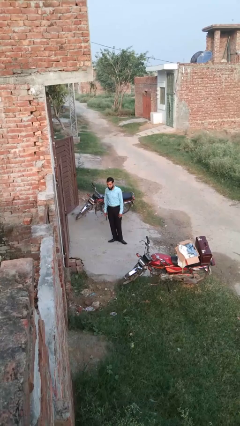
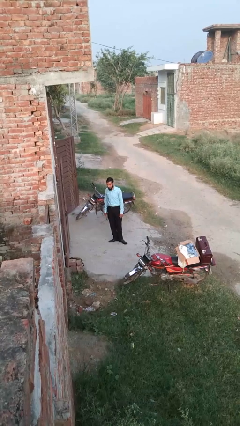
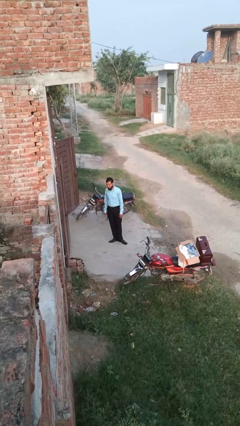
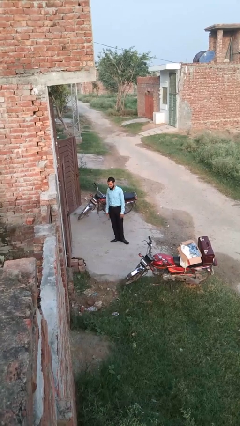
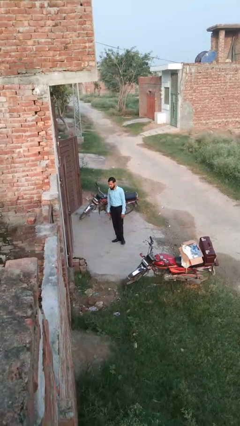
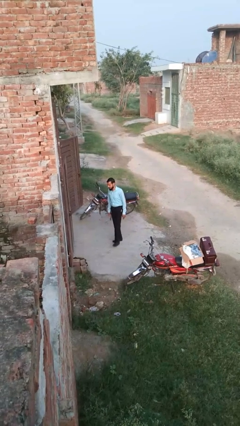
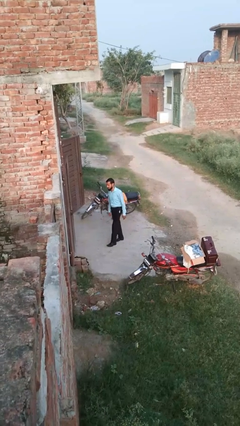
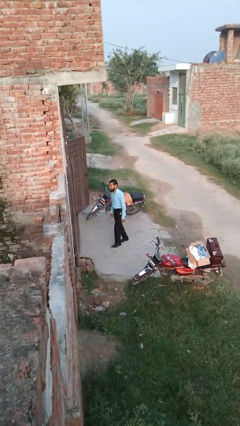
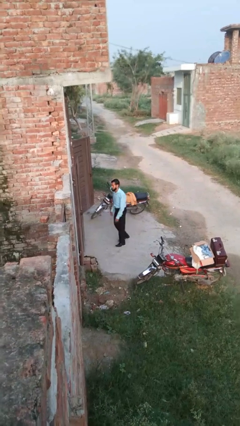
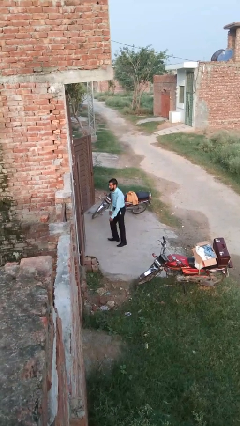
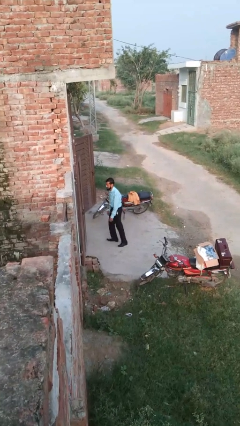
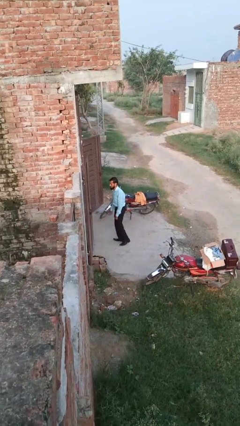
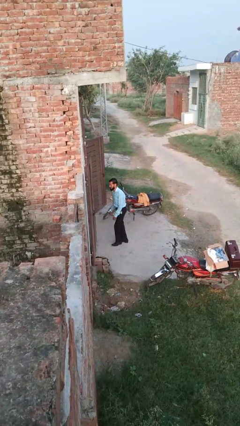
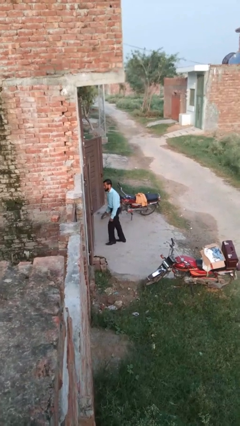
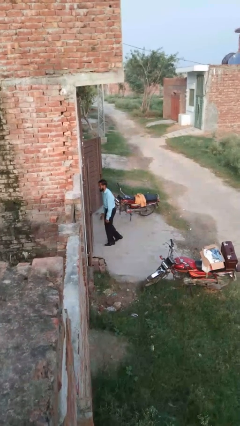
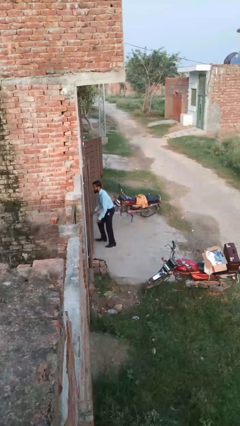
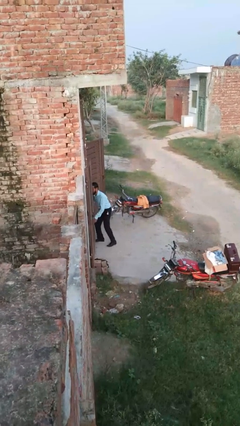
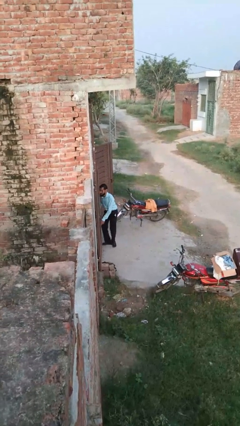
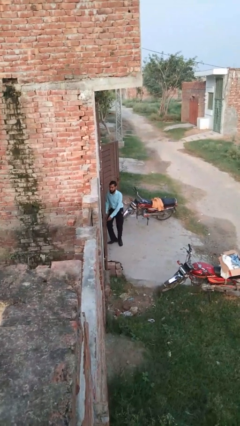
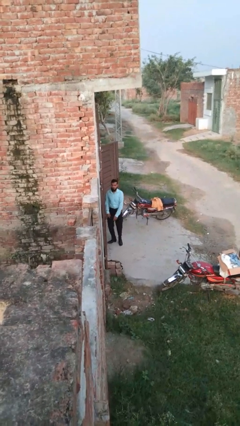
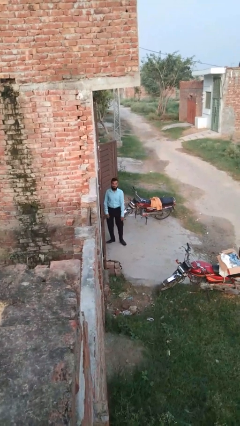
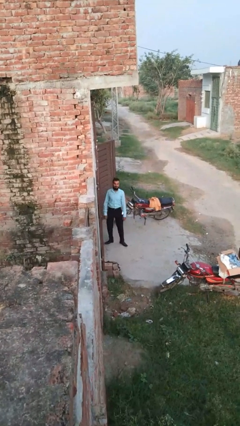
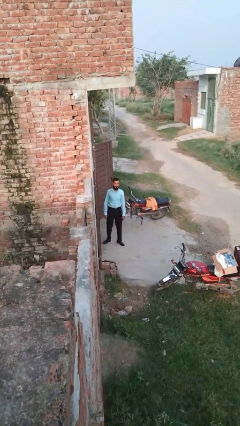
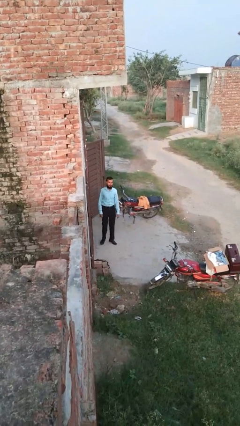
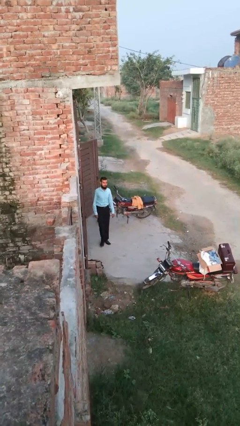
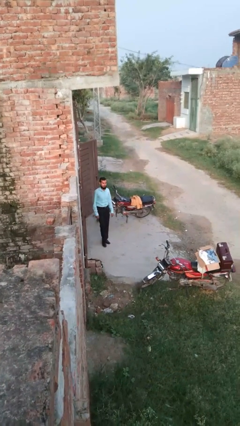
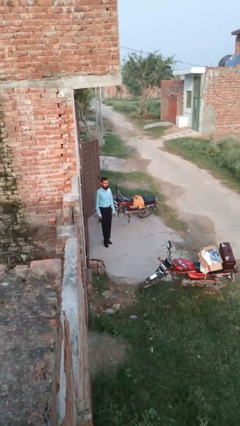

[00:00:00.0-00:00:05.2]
person bumps into wall

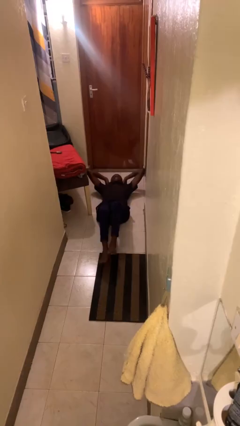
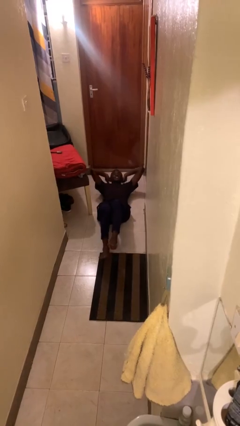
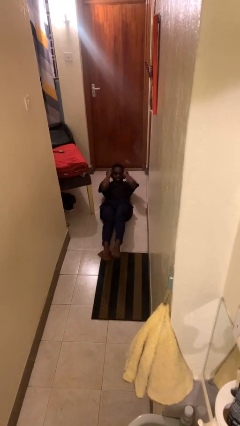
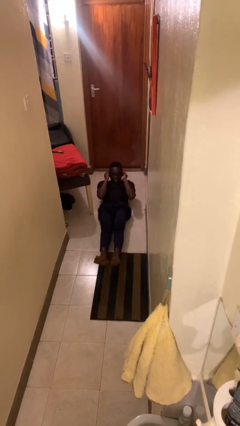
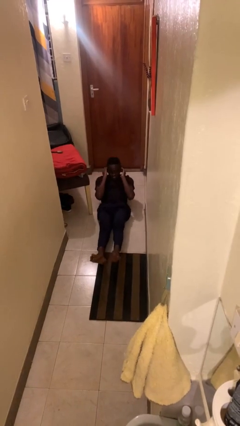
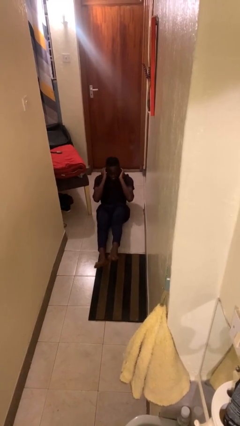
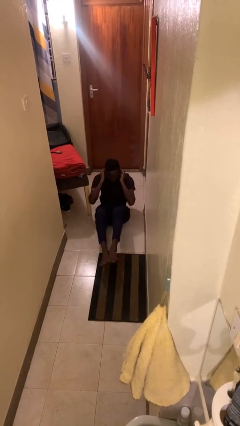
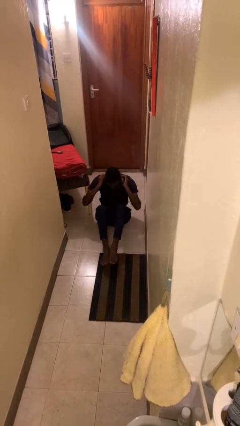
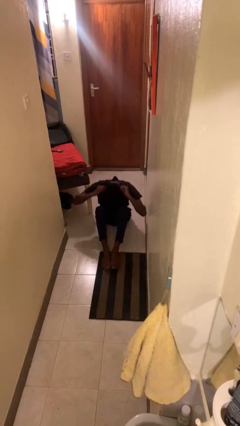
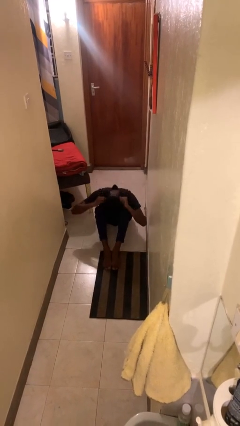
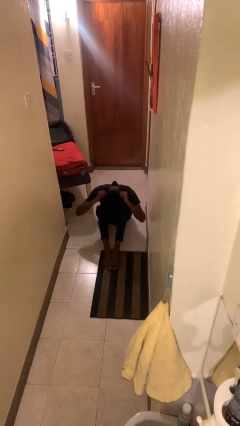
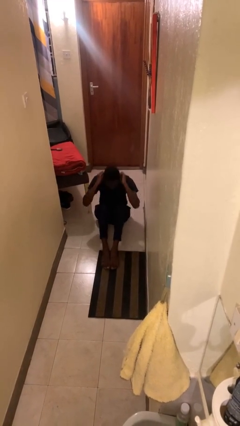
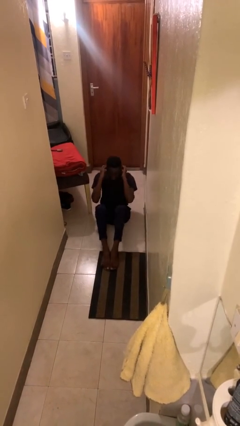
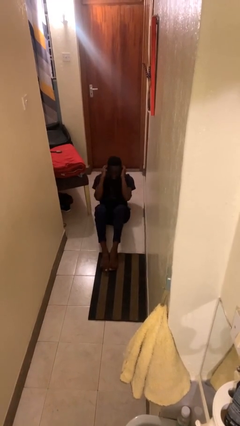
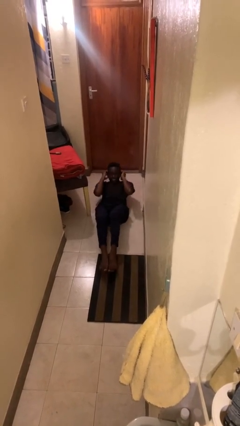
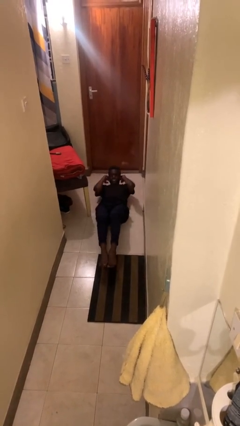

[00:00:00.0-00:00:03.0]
person exercises with situp

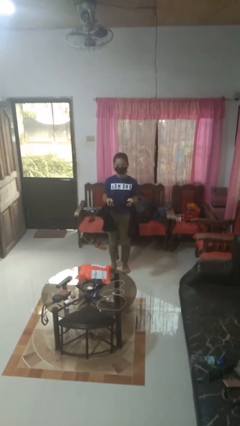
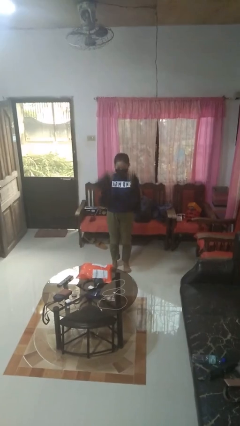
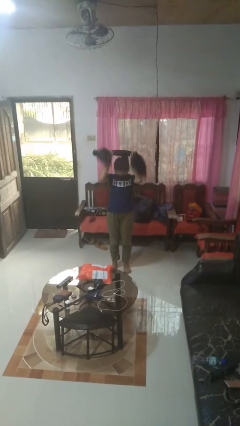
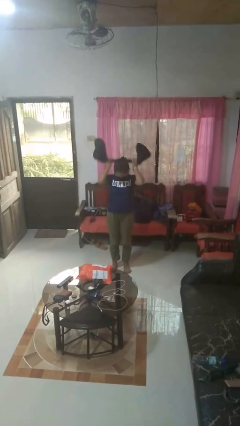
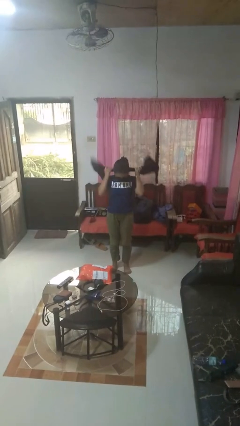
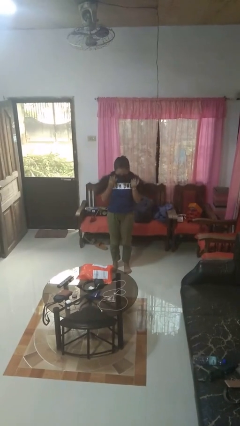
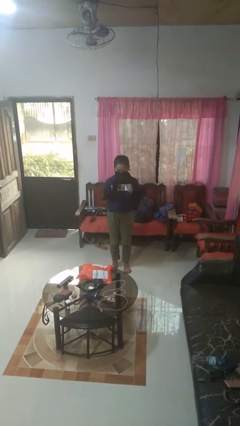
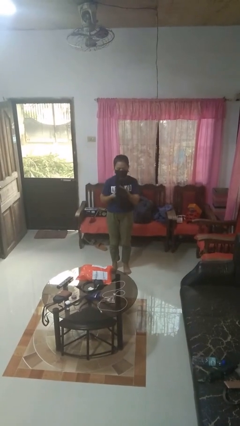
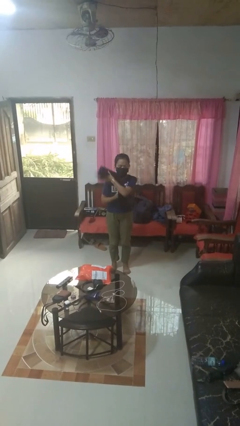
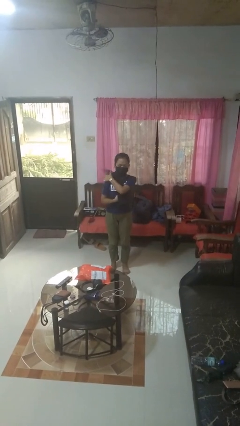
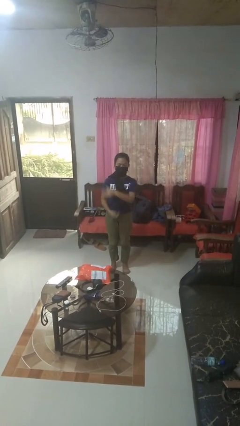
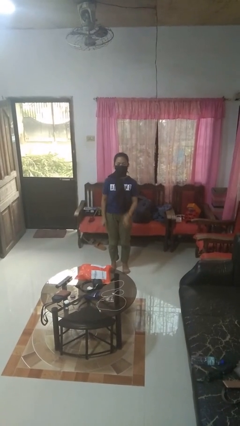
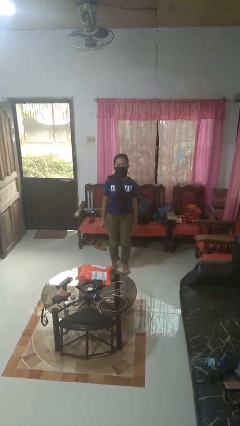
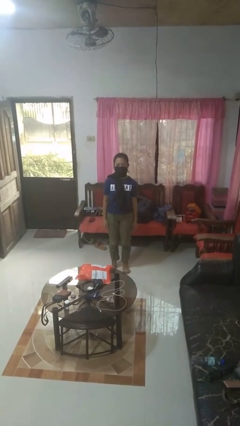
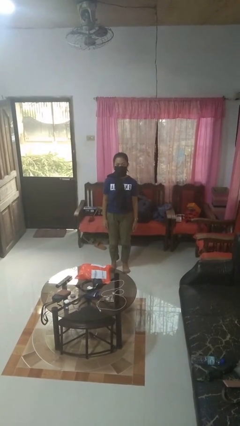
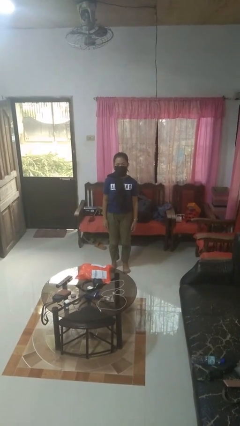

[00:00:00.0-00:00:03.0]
person puts on scarf

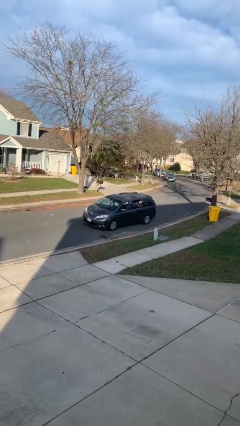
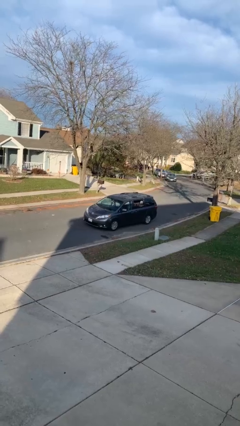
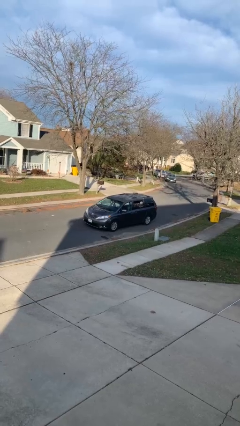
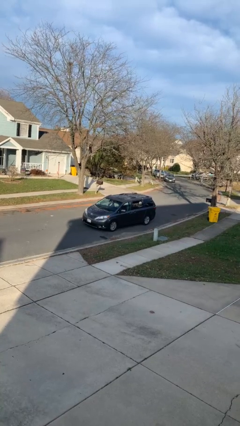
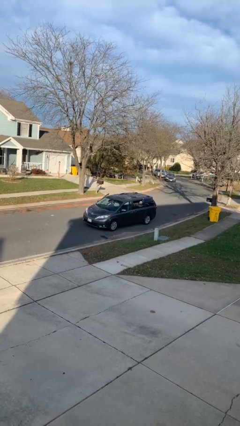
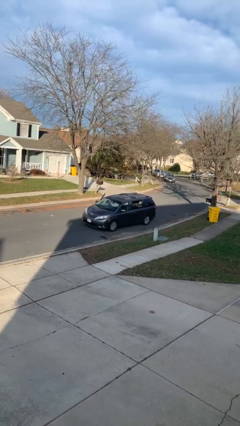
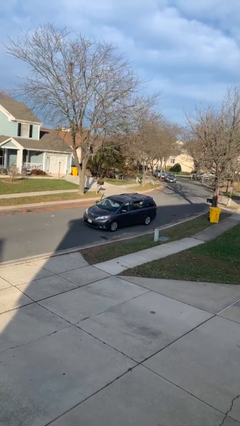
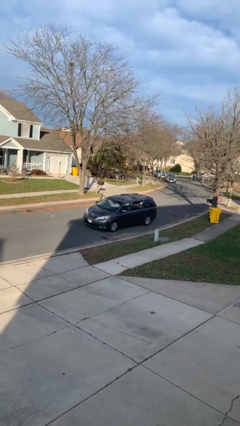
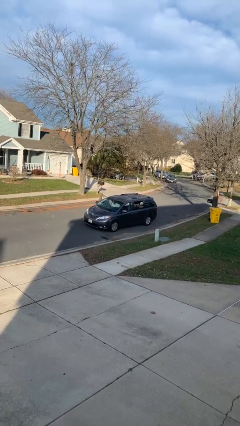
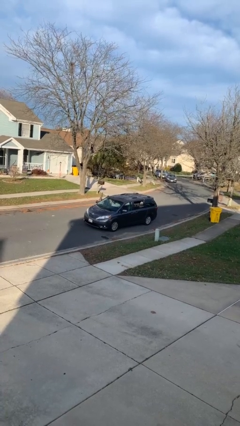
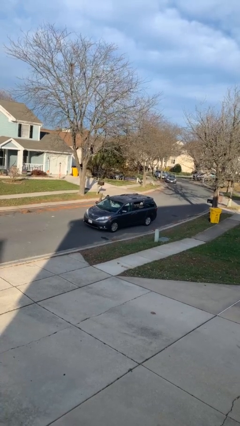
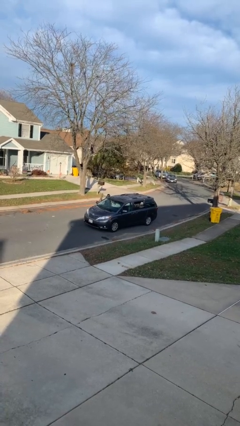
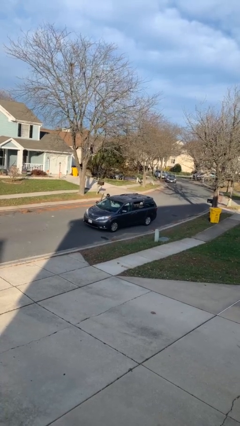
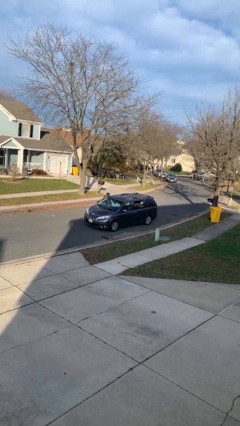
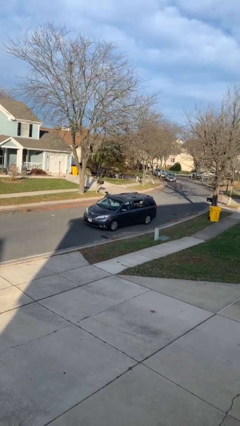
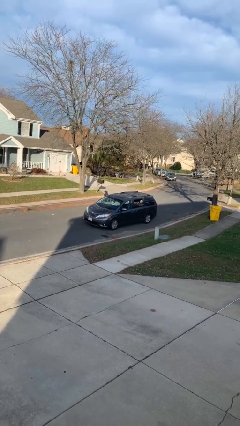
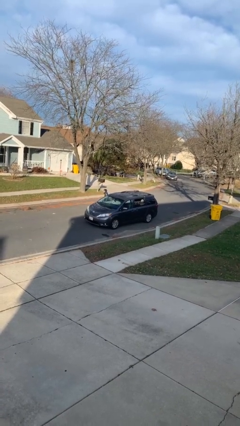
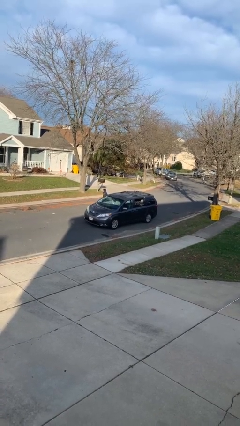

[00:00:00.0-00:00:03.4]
car drops off person

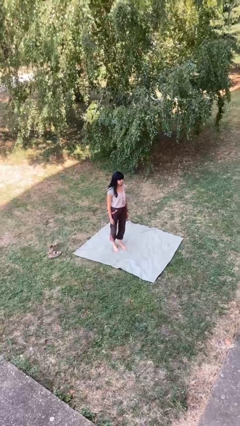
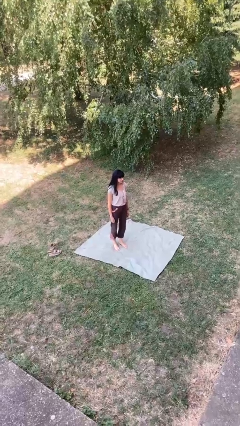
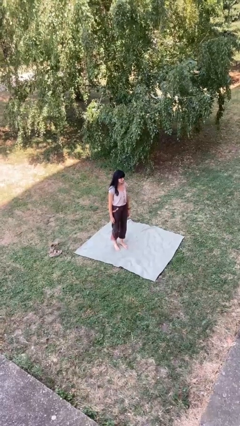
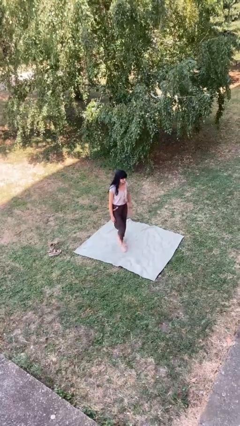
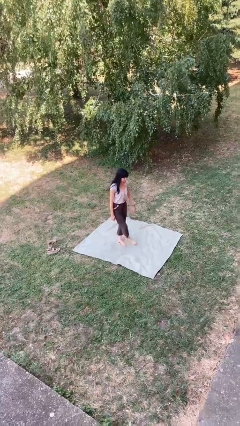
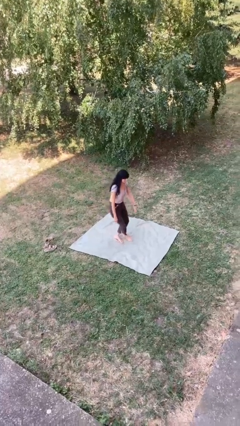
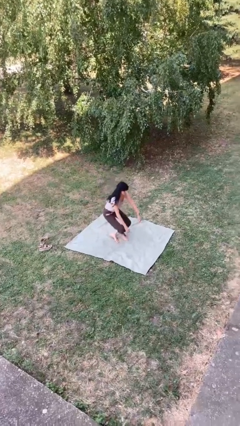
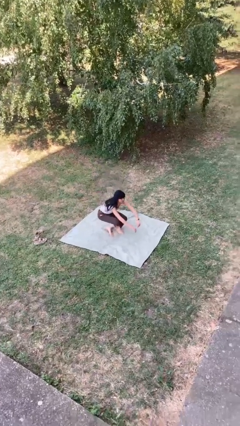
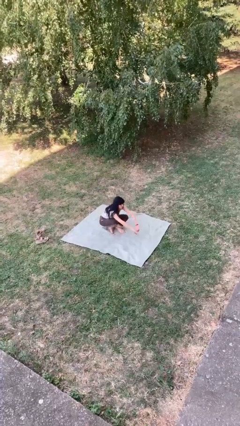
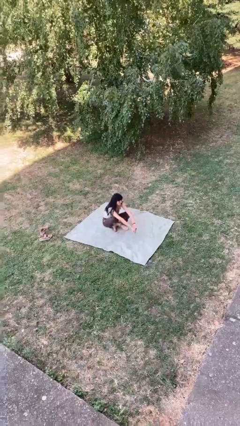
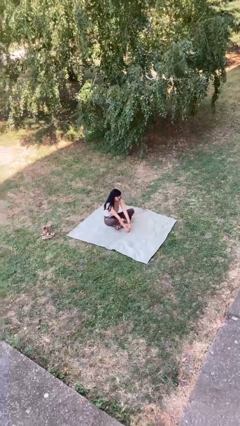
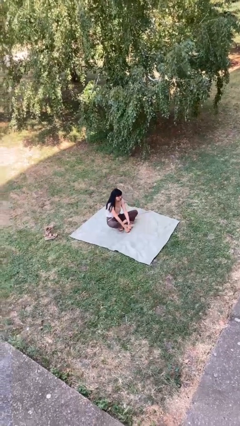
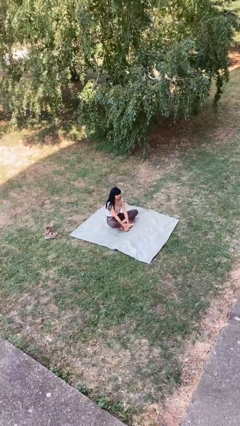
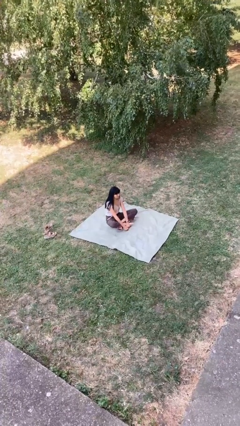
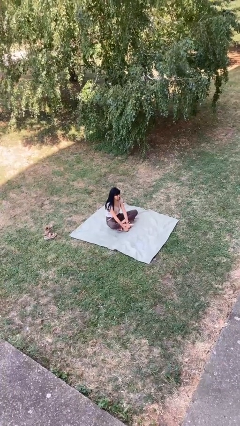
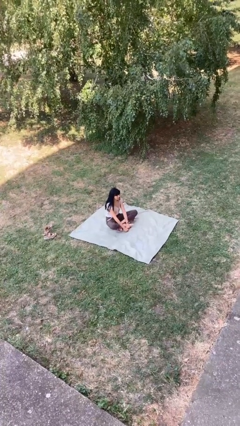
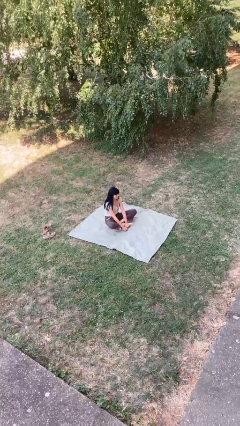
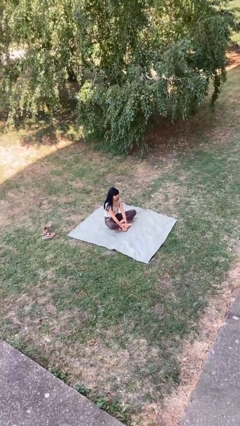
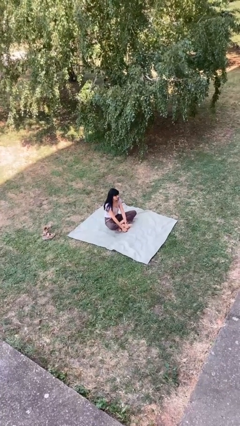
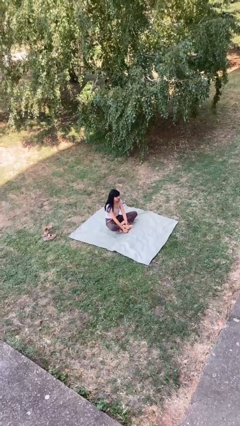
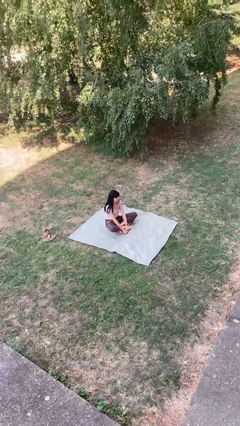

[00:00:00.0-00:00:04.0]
person sits crisscross
